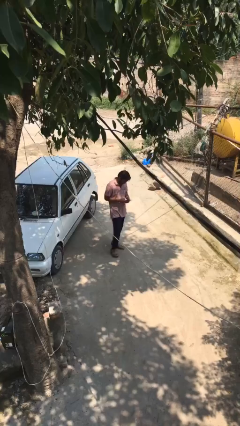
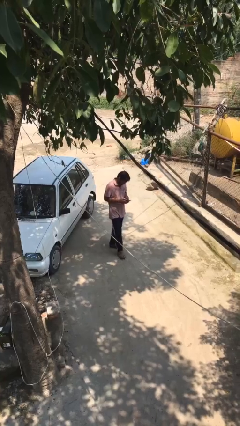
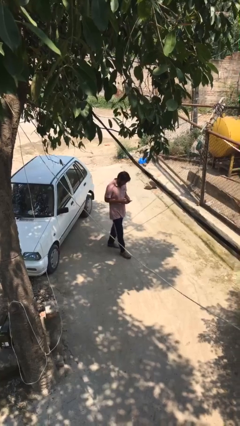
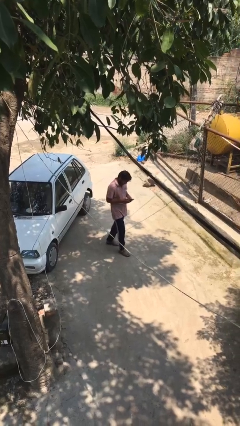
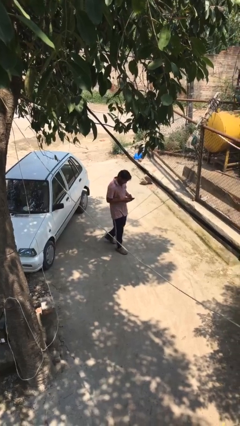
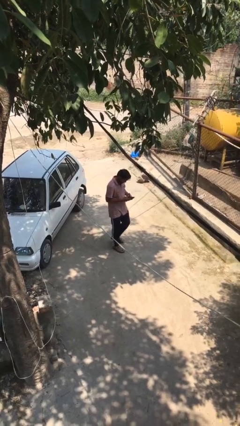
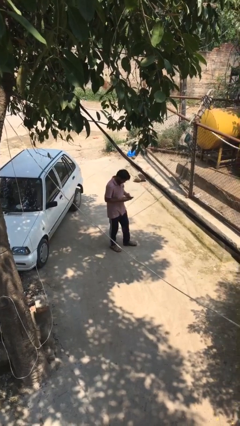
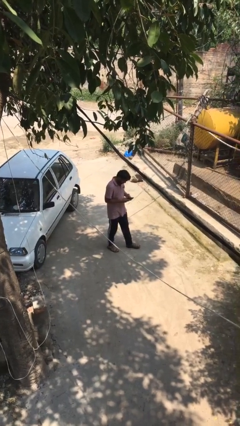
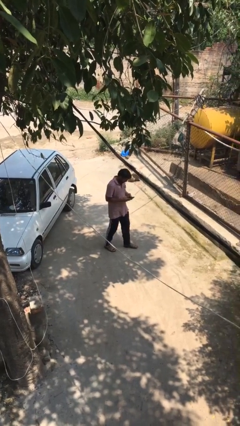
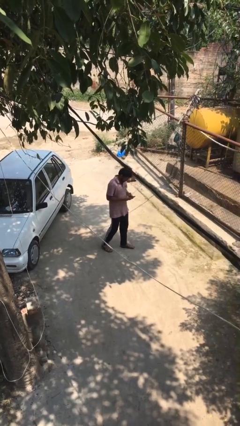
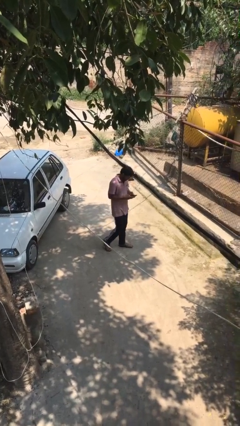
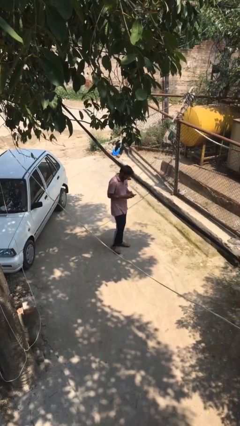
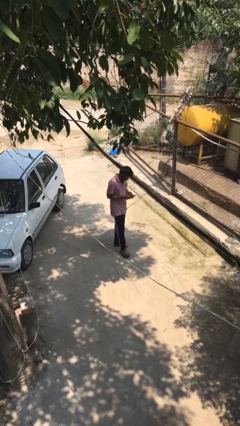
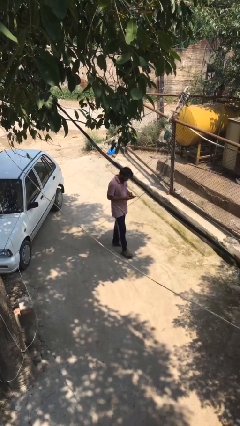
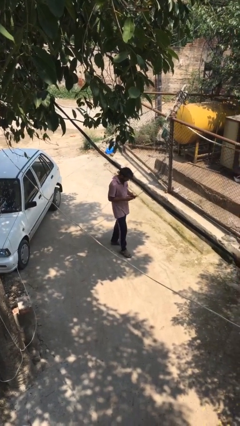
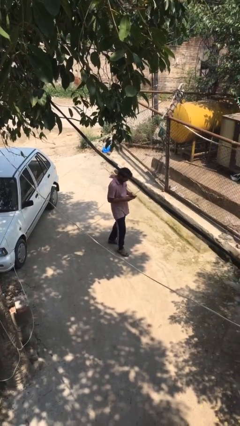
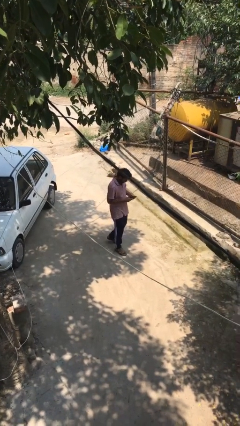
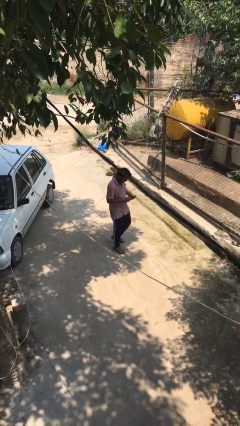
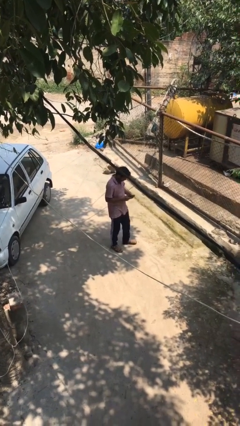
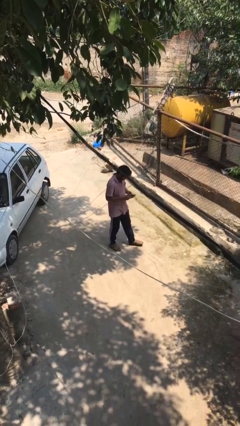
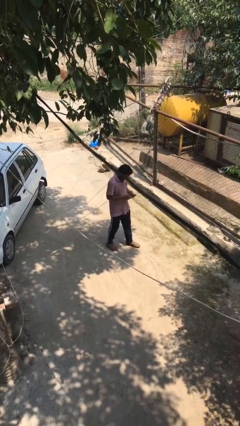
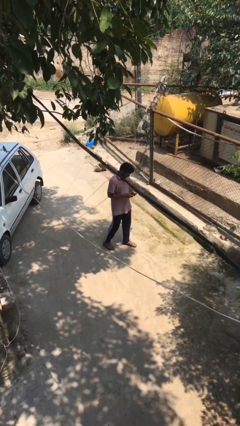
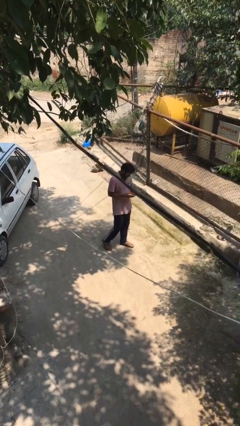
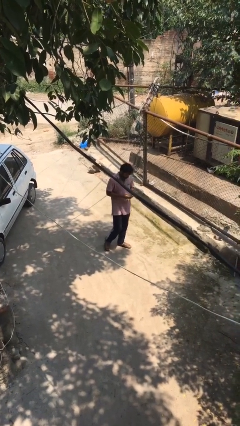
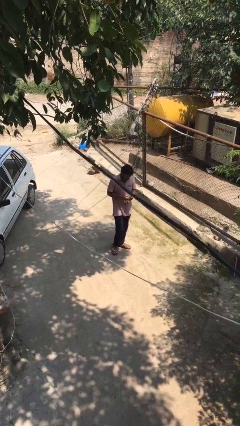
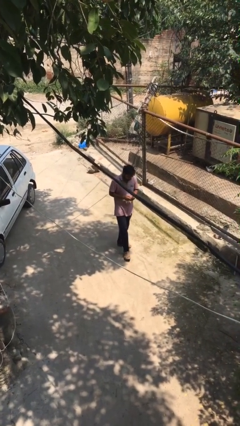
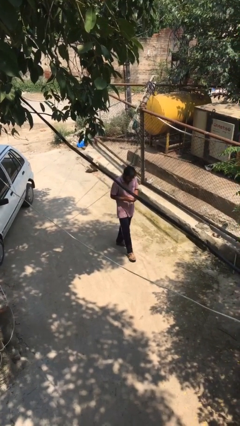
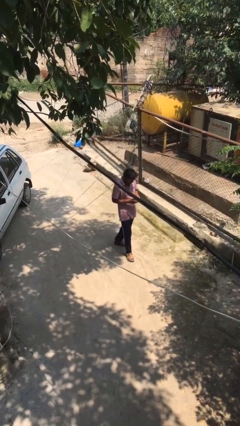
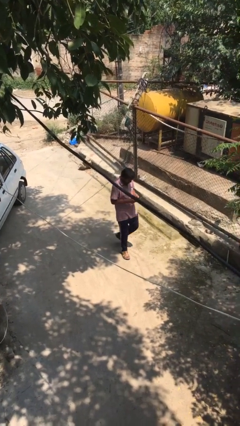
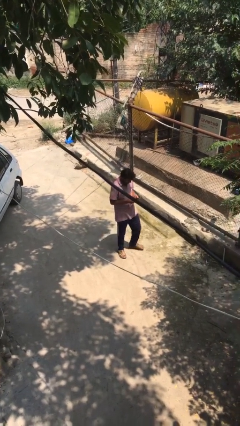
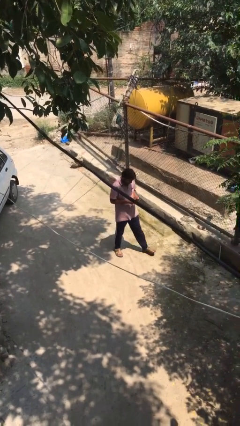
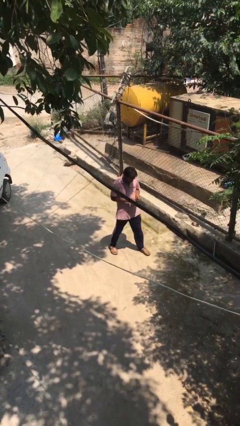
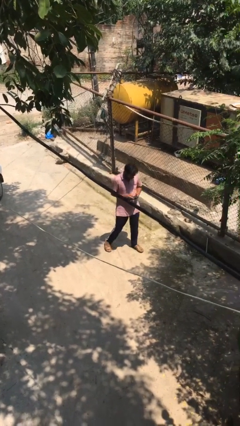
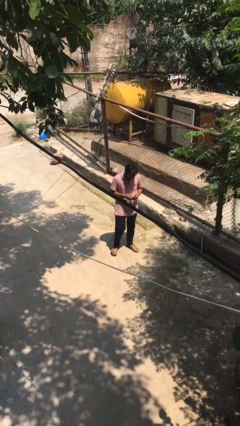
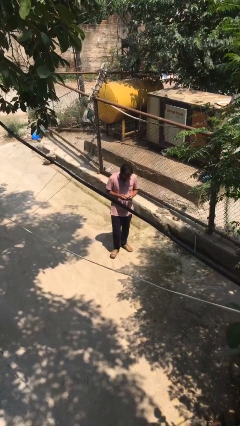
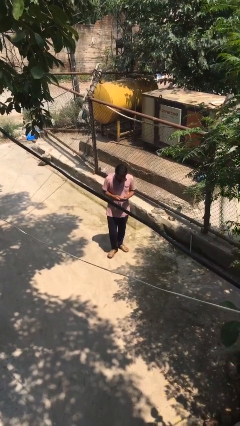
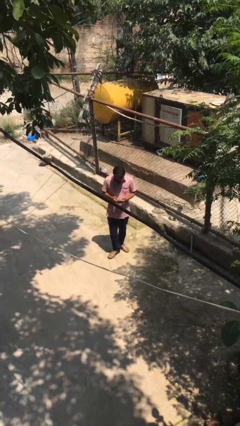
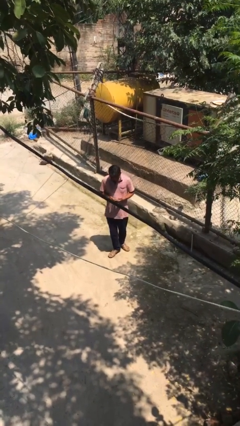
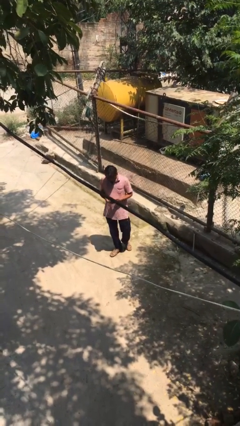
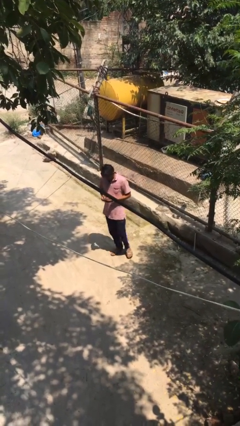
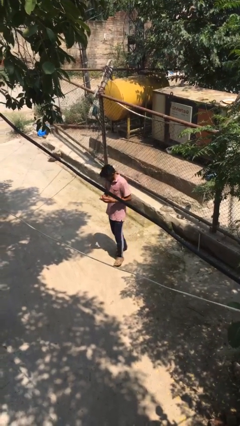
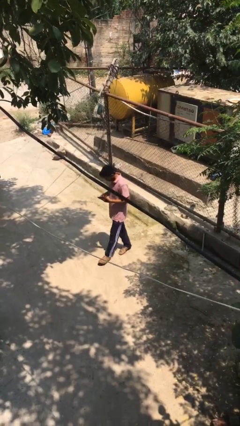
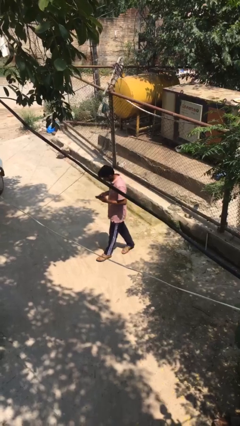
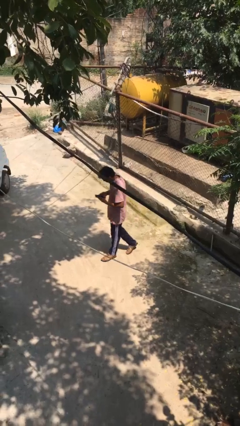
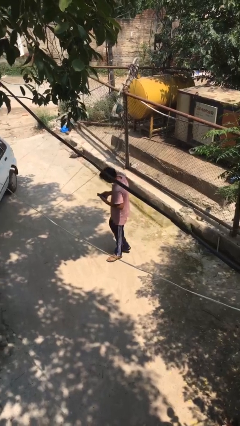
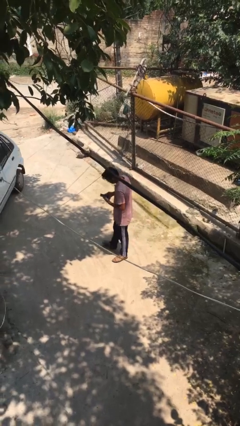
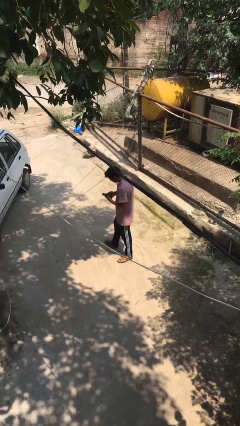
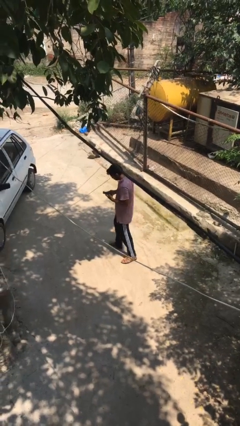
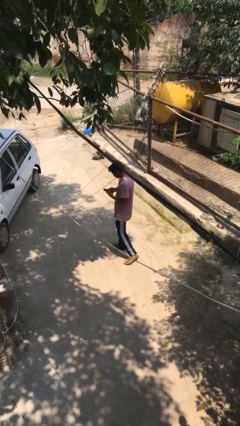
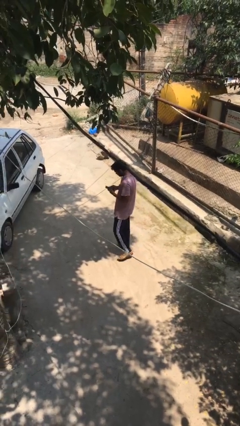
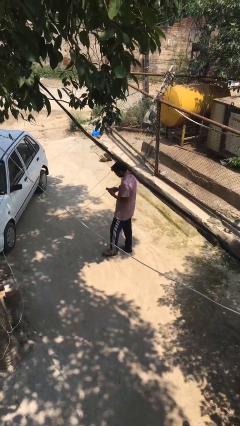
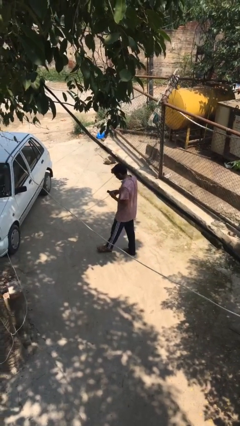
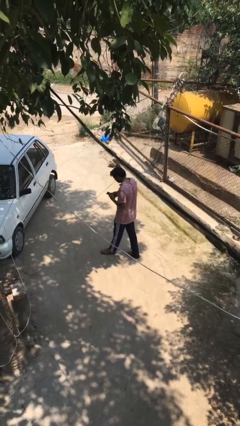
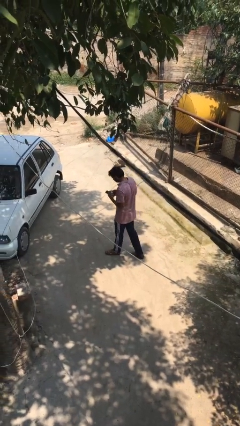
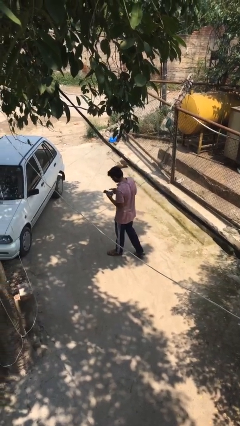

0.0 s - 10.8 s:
person texts on phone

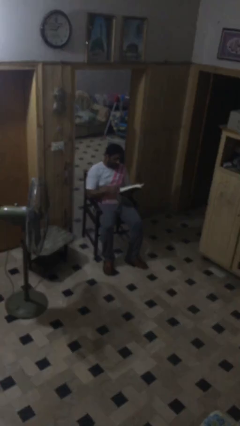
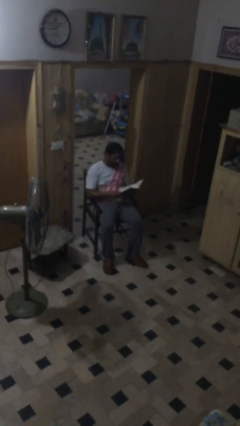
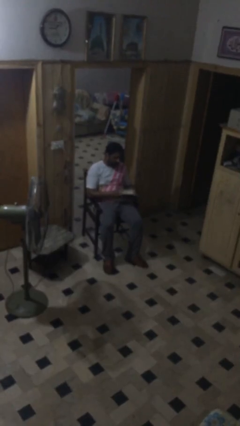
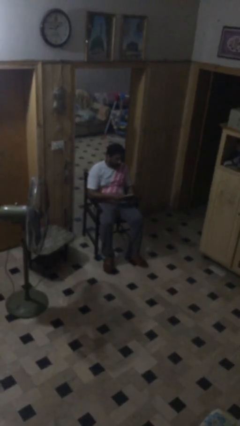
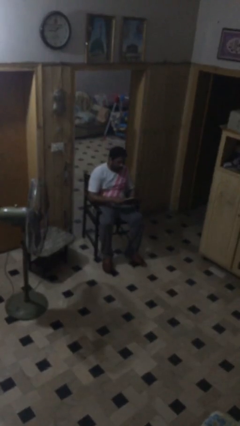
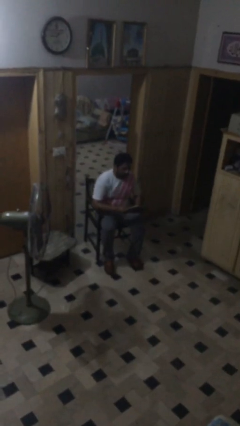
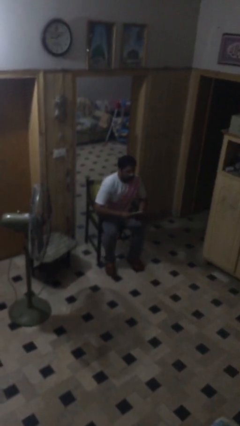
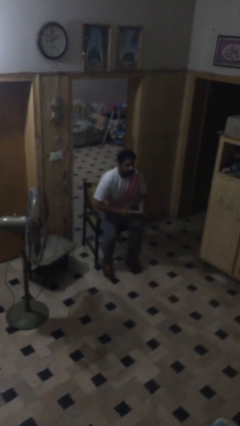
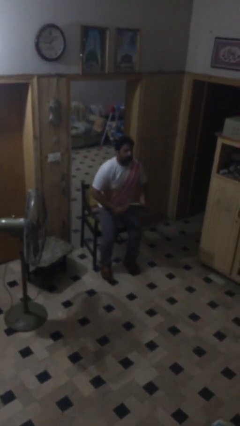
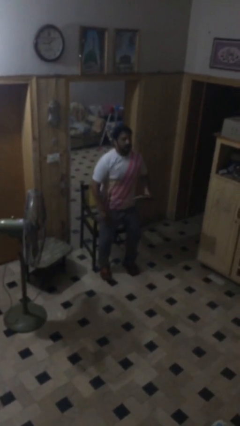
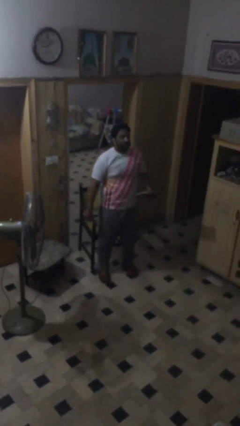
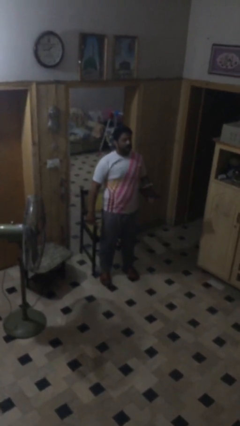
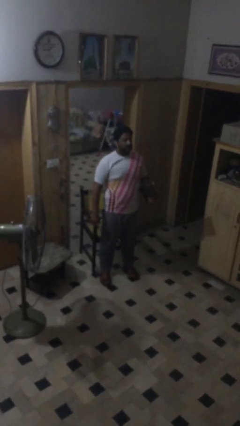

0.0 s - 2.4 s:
person stands up

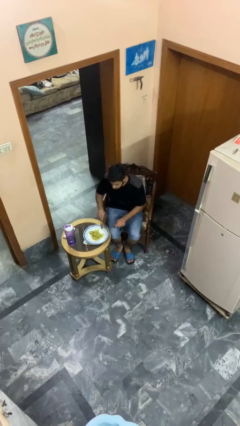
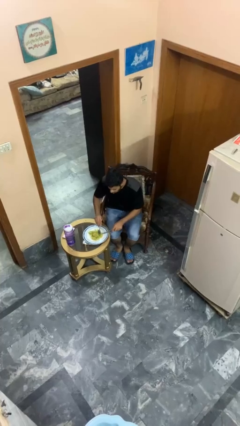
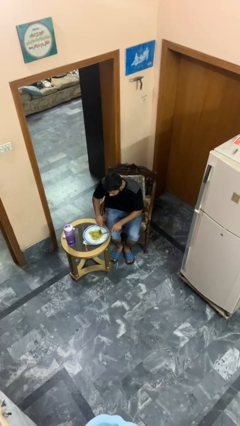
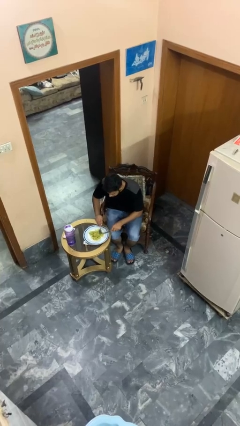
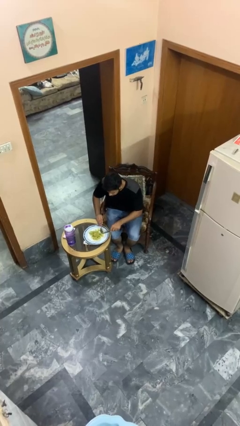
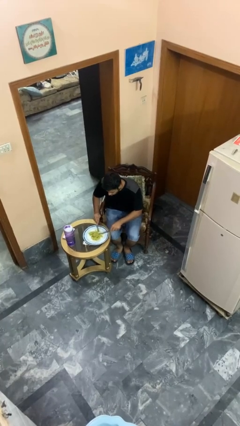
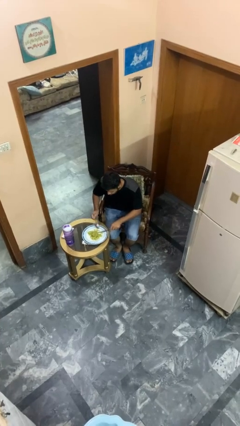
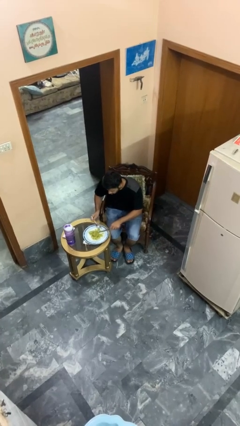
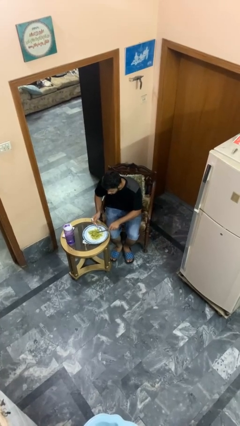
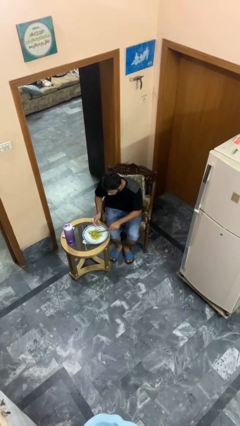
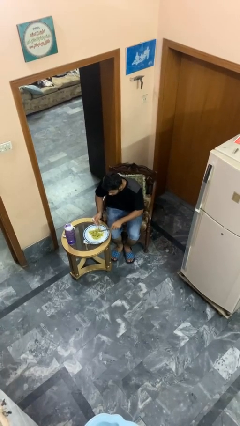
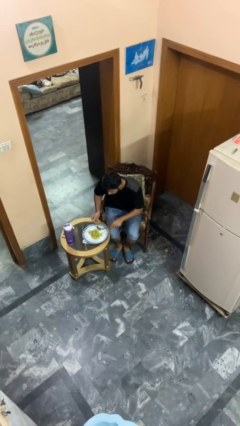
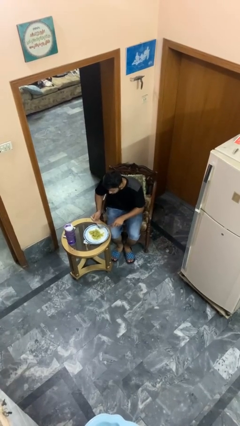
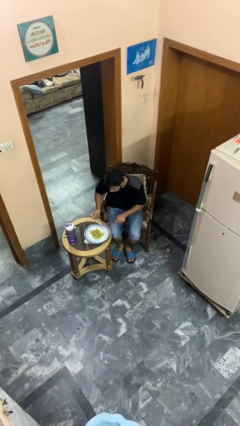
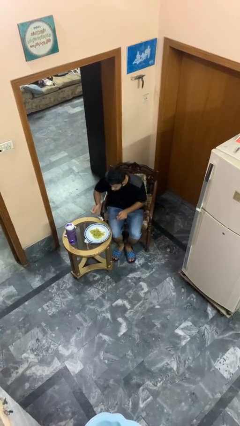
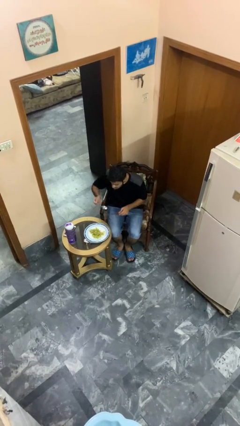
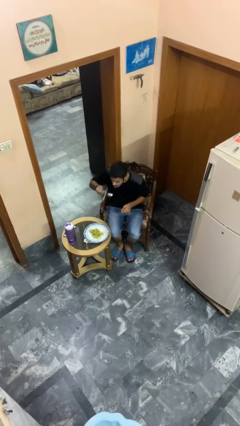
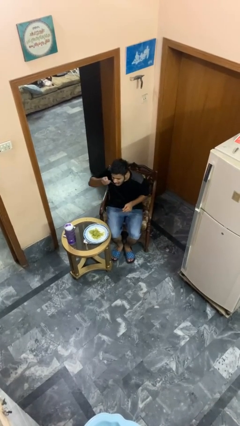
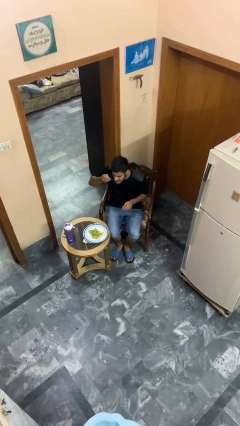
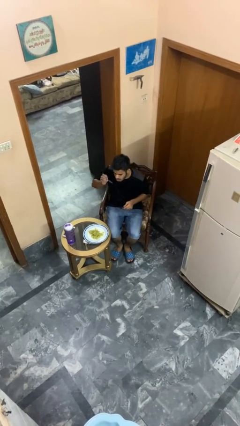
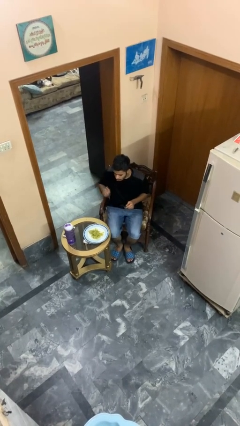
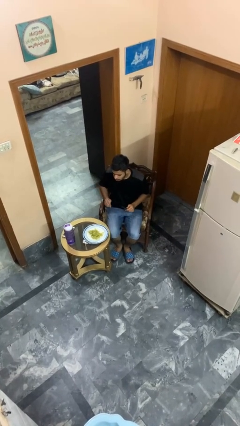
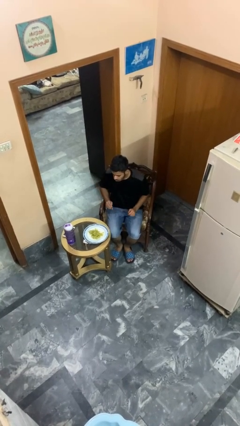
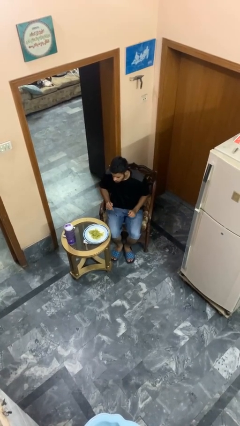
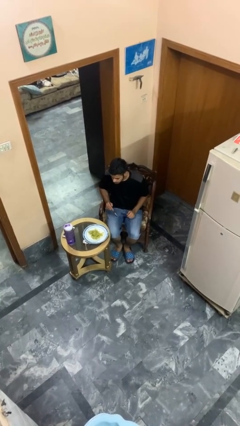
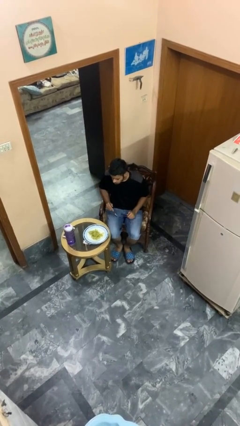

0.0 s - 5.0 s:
person eats with utensil
